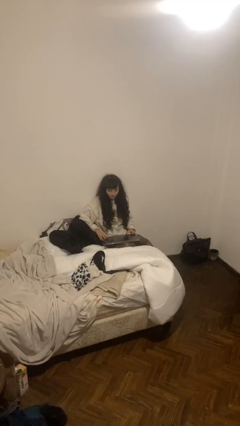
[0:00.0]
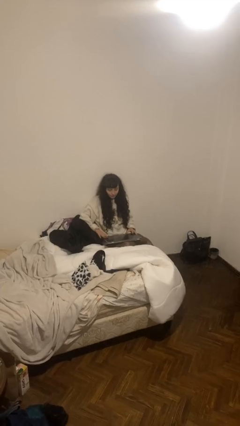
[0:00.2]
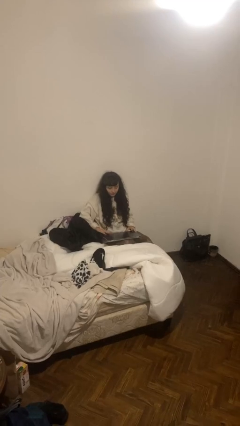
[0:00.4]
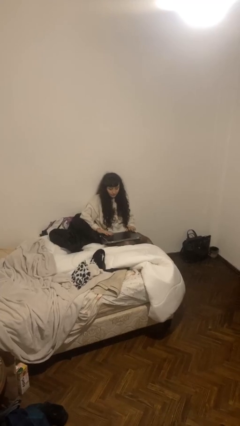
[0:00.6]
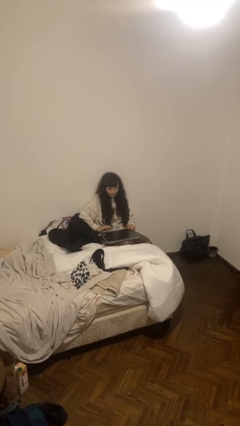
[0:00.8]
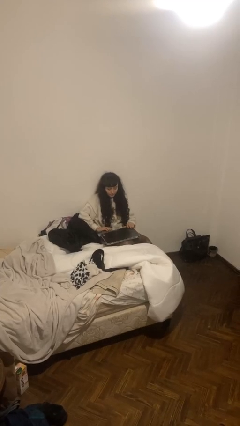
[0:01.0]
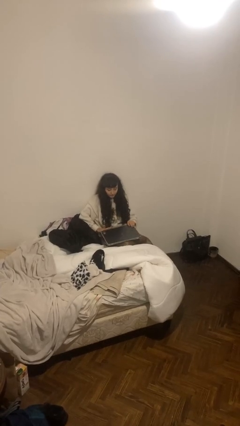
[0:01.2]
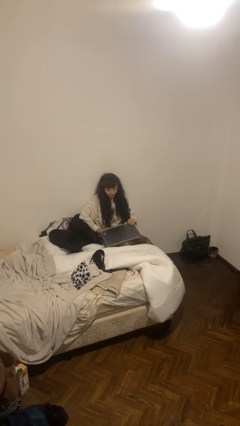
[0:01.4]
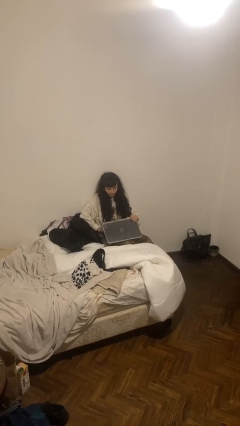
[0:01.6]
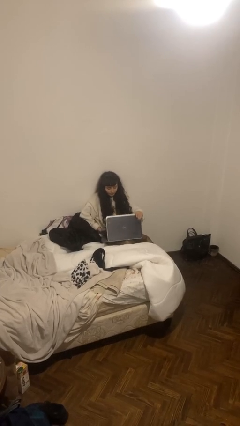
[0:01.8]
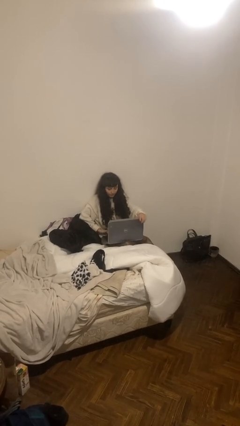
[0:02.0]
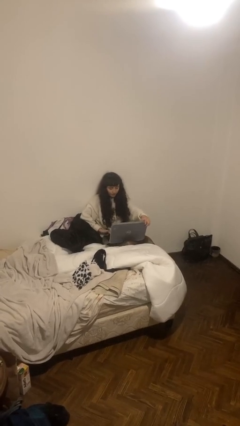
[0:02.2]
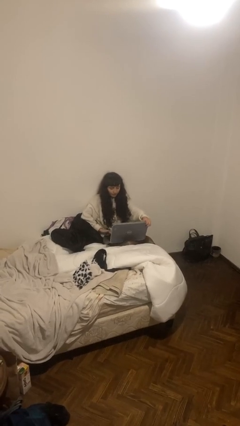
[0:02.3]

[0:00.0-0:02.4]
person opens laptop

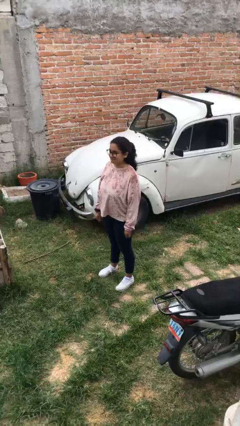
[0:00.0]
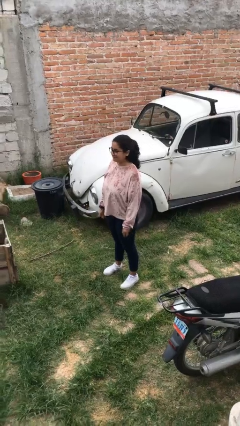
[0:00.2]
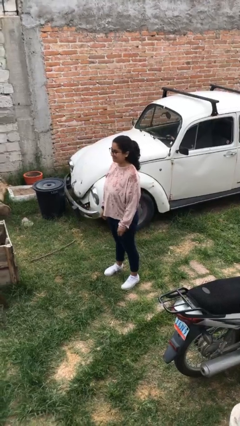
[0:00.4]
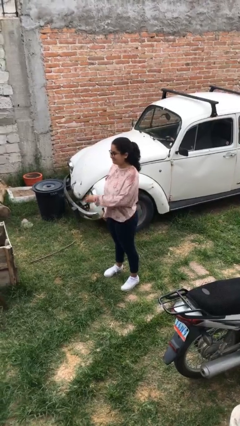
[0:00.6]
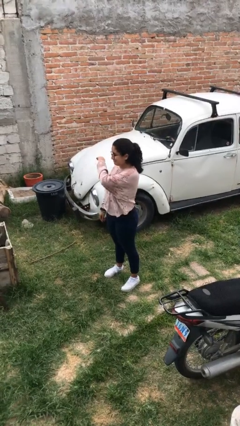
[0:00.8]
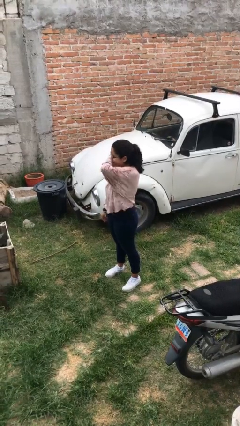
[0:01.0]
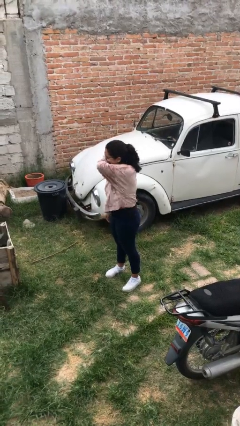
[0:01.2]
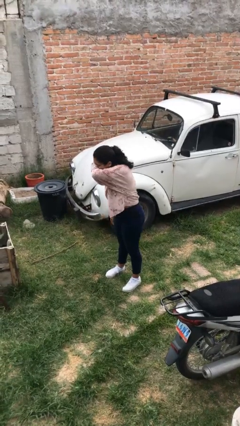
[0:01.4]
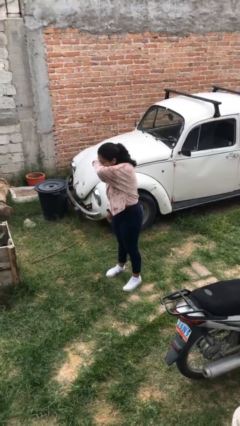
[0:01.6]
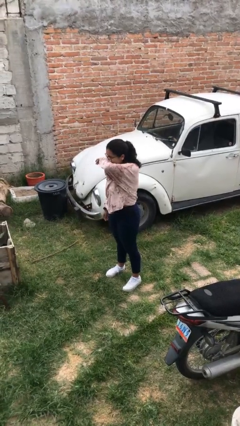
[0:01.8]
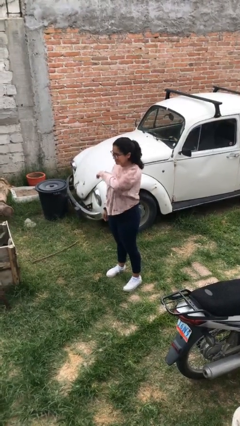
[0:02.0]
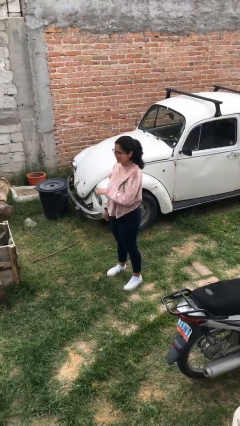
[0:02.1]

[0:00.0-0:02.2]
person sneezes into arm

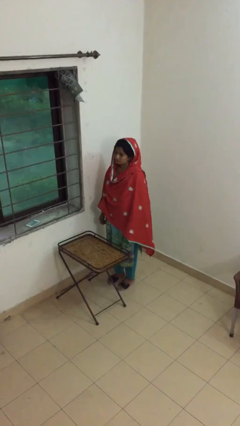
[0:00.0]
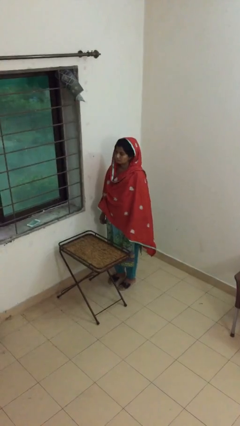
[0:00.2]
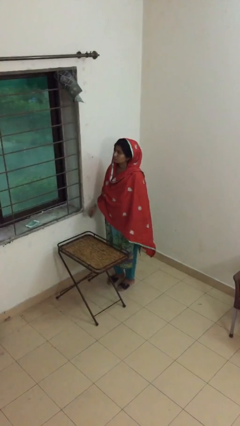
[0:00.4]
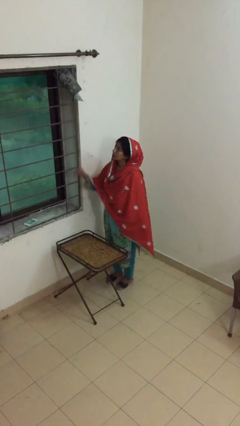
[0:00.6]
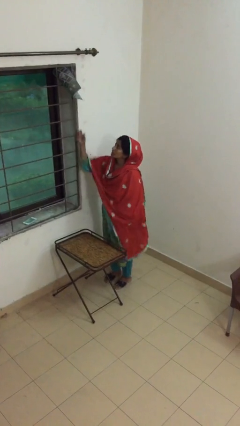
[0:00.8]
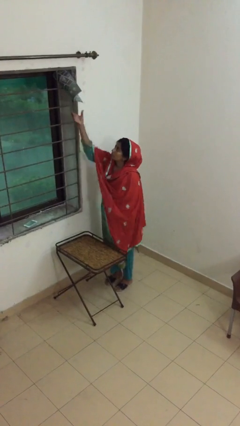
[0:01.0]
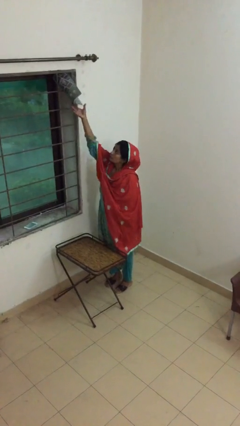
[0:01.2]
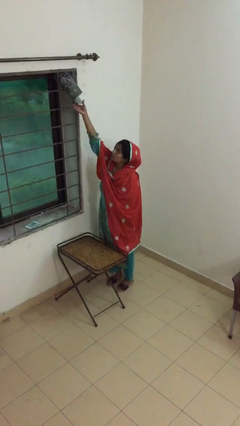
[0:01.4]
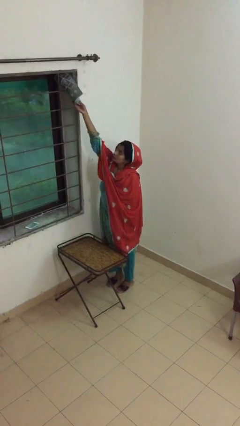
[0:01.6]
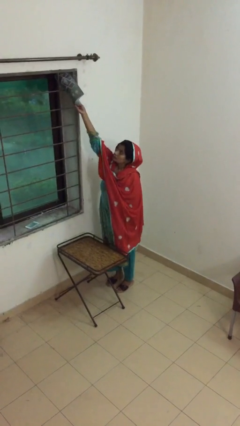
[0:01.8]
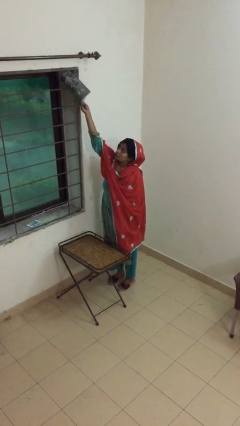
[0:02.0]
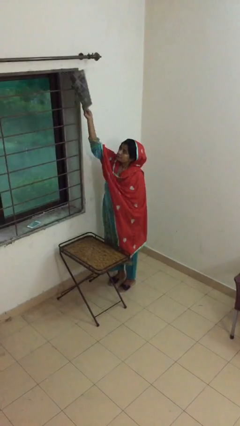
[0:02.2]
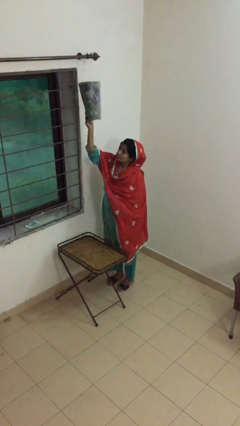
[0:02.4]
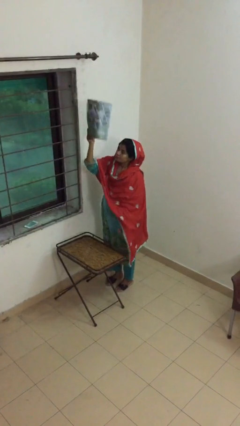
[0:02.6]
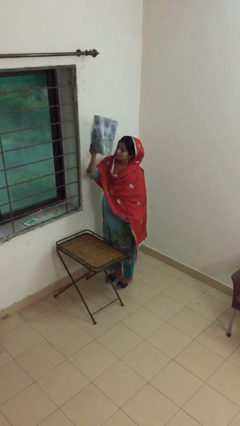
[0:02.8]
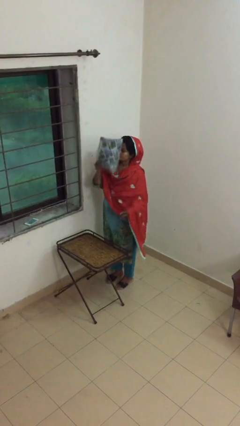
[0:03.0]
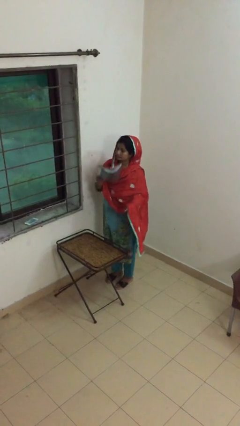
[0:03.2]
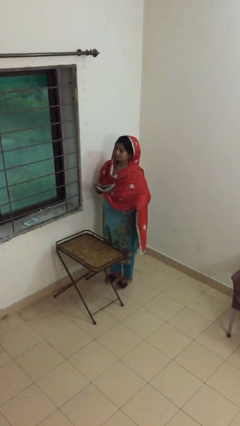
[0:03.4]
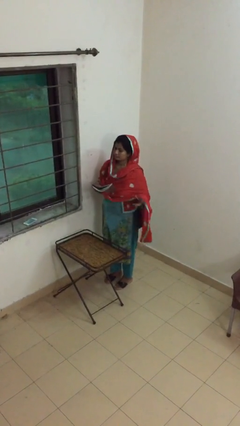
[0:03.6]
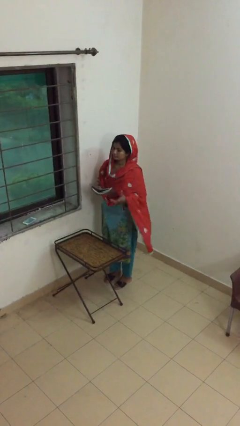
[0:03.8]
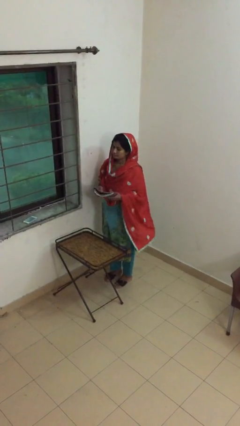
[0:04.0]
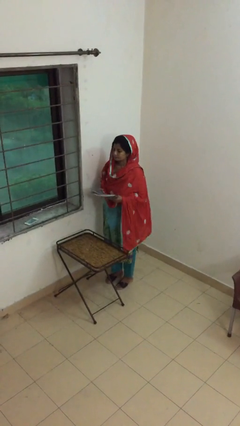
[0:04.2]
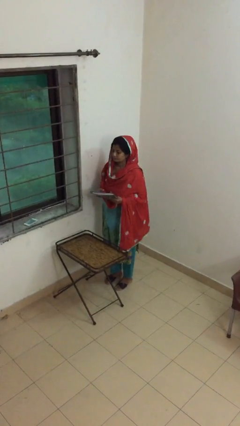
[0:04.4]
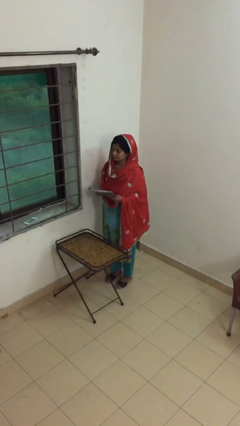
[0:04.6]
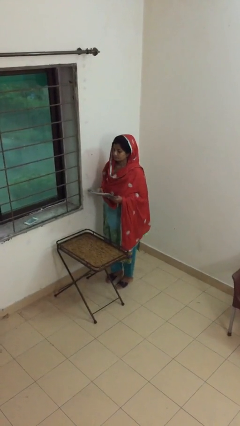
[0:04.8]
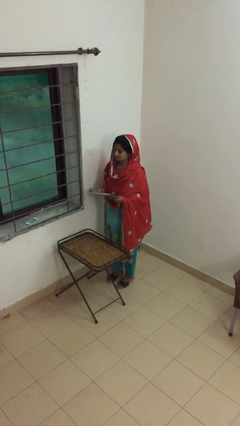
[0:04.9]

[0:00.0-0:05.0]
person picks up object from shelf

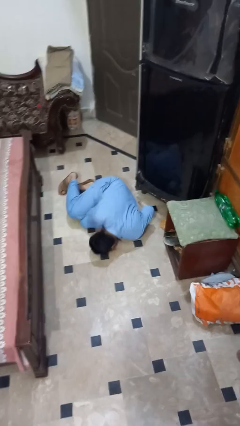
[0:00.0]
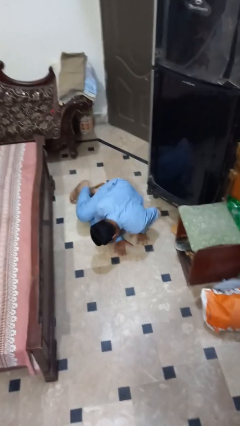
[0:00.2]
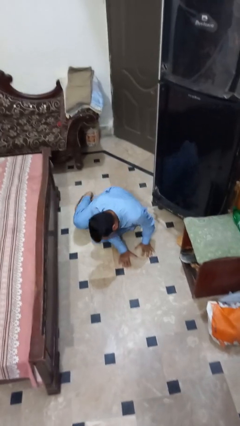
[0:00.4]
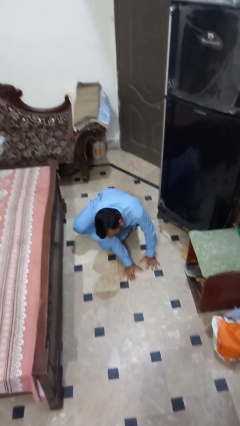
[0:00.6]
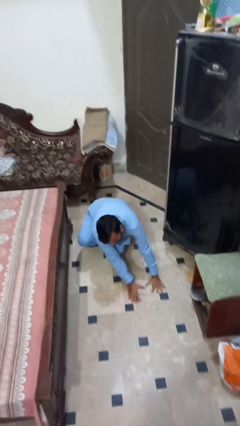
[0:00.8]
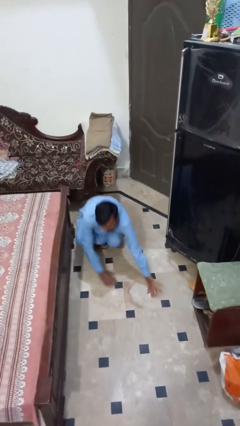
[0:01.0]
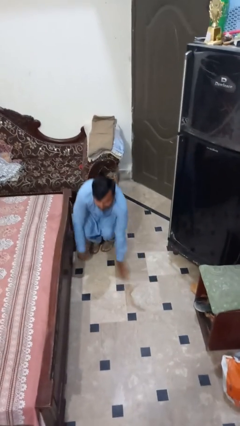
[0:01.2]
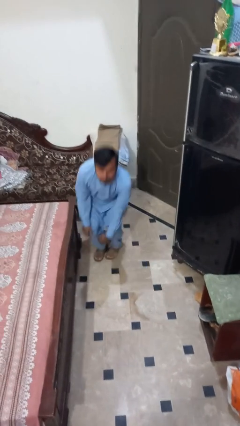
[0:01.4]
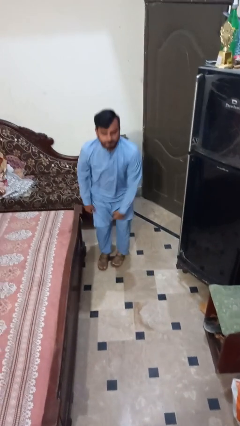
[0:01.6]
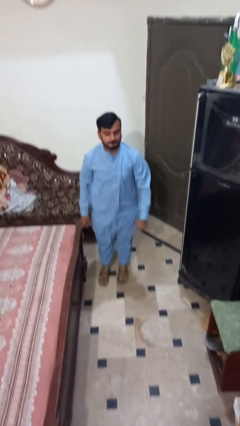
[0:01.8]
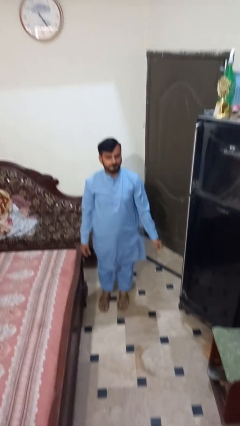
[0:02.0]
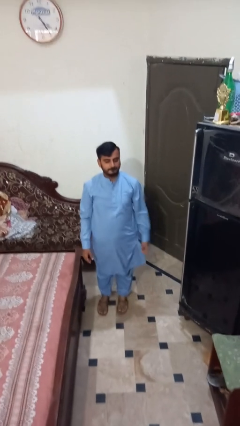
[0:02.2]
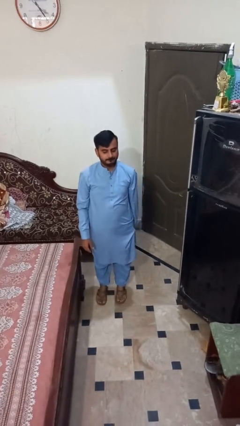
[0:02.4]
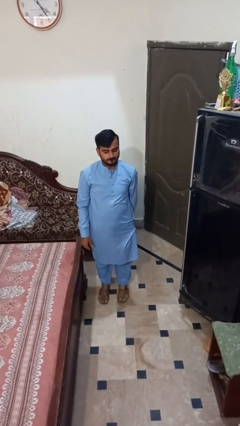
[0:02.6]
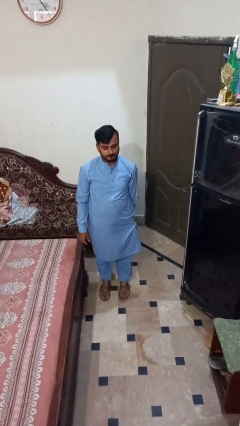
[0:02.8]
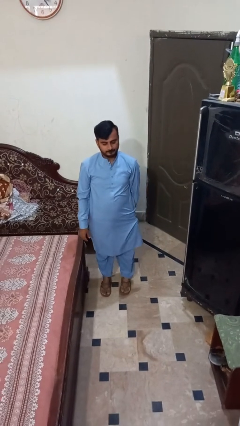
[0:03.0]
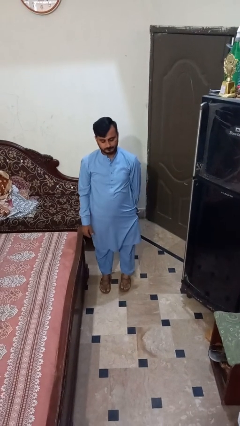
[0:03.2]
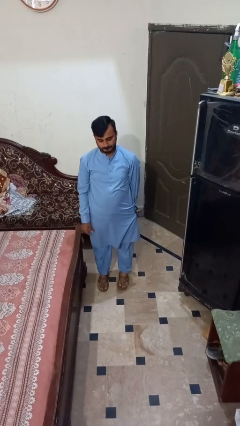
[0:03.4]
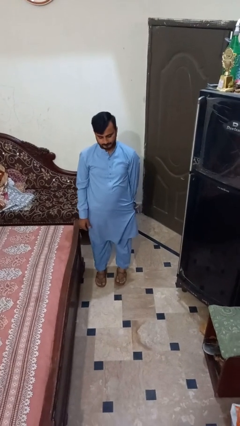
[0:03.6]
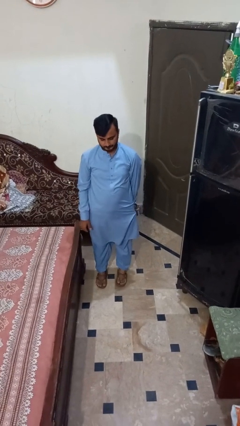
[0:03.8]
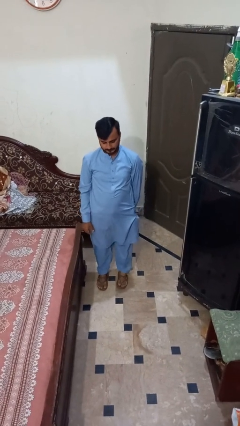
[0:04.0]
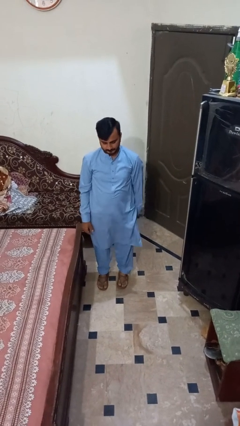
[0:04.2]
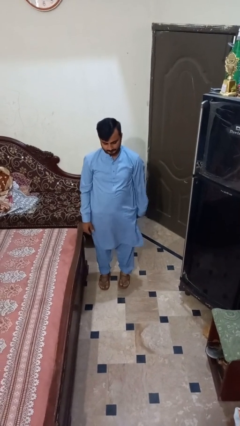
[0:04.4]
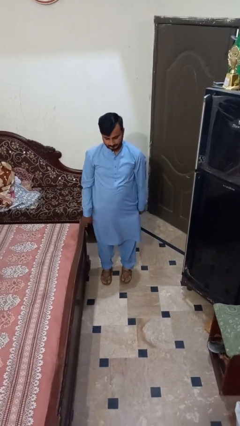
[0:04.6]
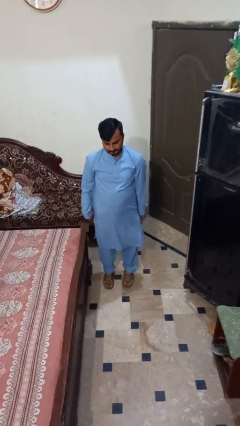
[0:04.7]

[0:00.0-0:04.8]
person stands up from floor

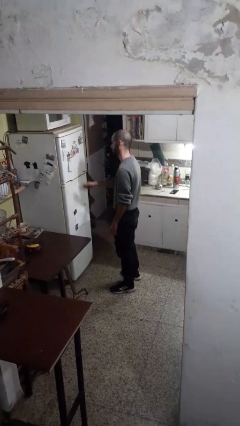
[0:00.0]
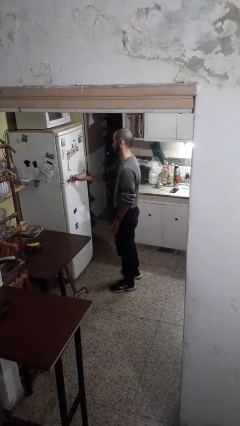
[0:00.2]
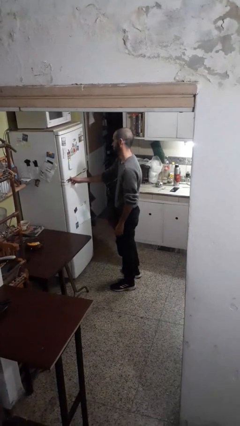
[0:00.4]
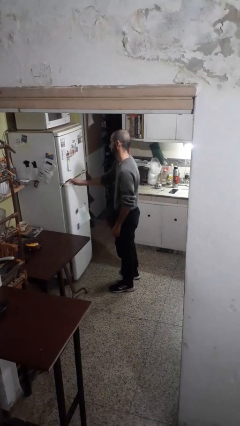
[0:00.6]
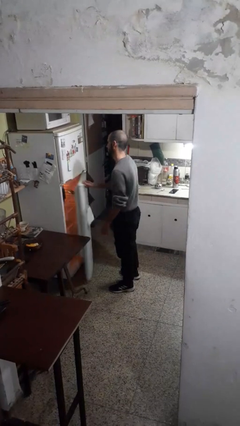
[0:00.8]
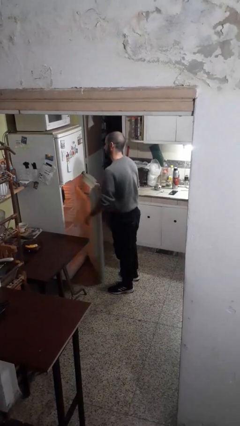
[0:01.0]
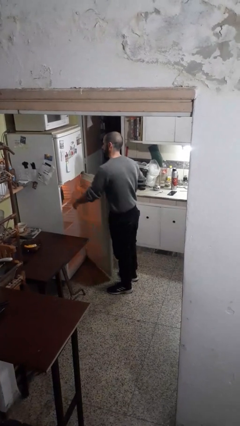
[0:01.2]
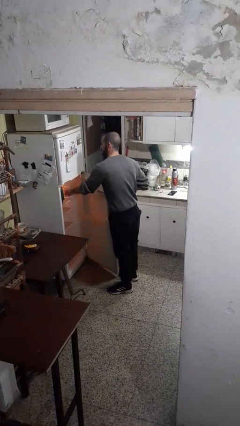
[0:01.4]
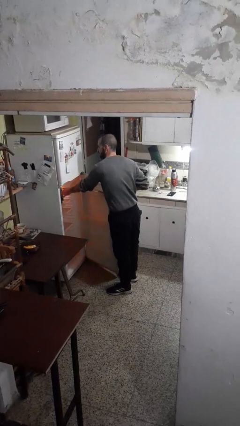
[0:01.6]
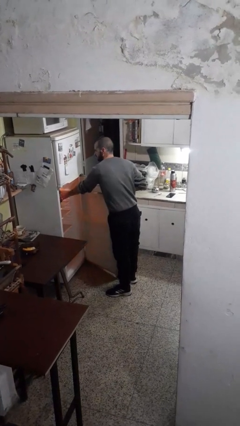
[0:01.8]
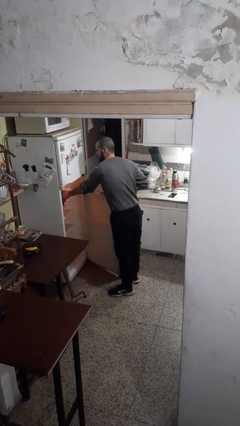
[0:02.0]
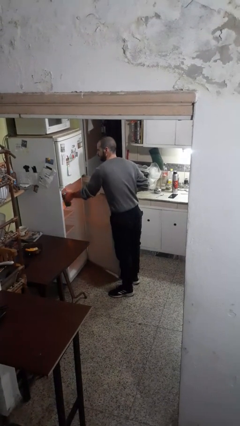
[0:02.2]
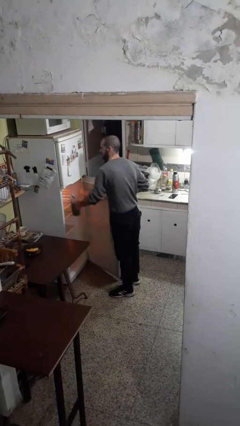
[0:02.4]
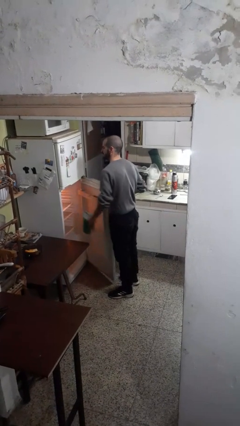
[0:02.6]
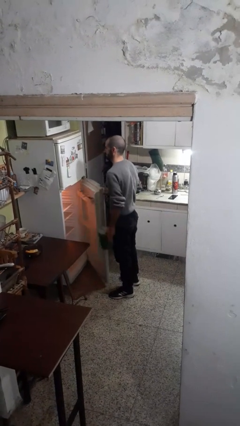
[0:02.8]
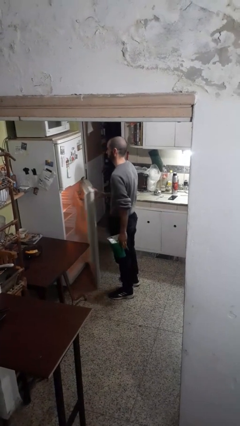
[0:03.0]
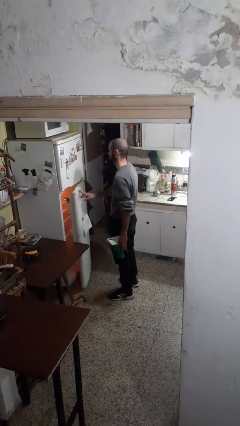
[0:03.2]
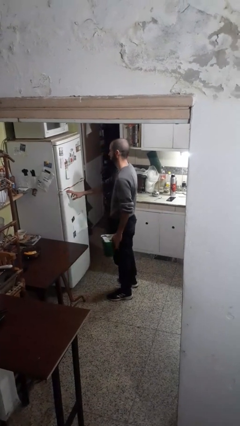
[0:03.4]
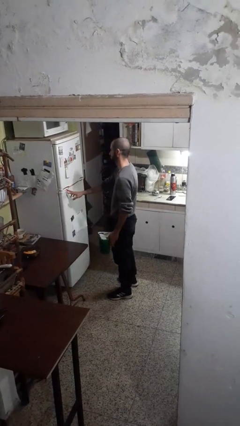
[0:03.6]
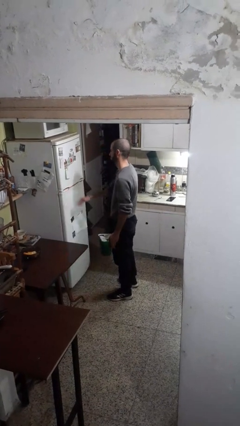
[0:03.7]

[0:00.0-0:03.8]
person takes object from refrigerator
